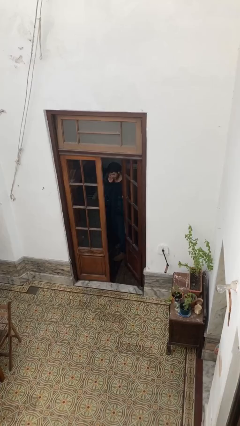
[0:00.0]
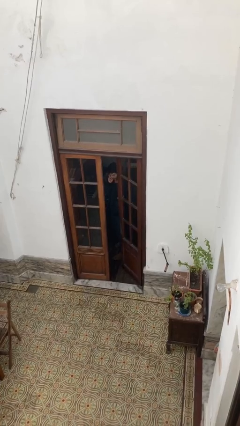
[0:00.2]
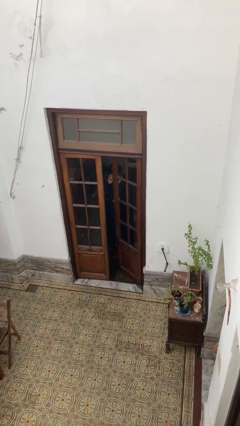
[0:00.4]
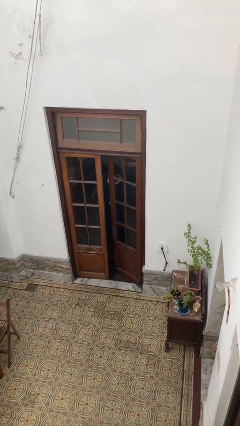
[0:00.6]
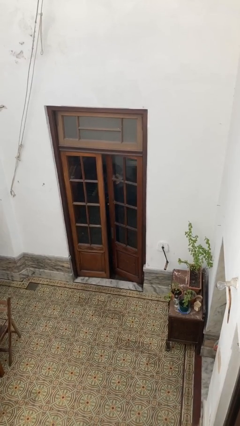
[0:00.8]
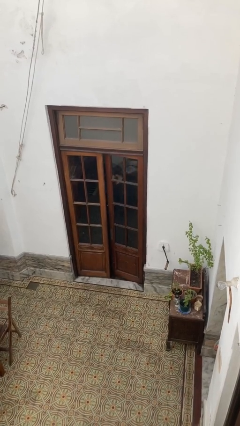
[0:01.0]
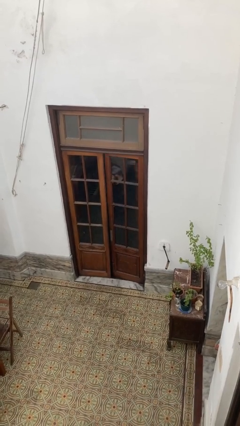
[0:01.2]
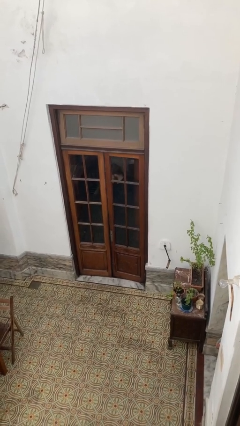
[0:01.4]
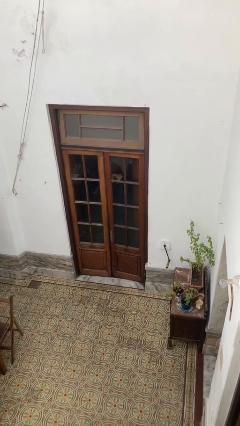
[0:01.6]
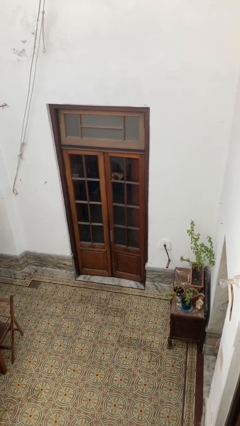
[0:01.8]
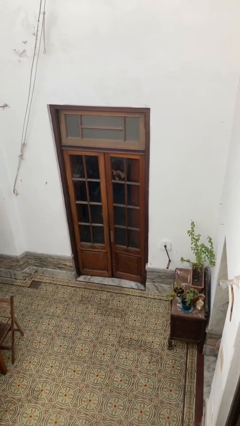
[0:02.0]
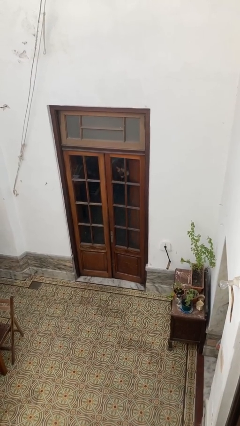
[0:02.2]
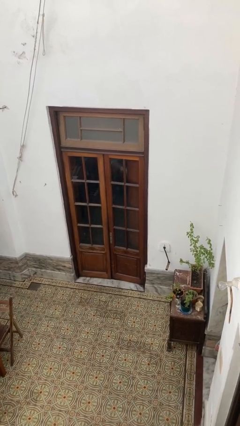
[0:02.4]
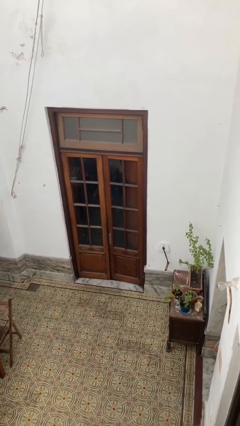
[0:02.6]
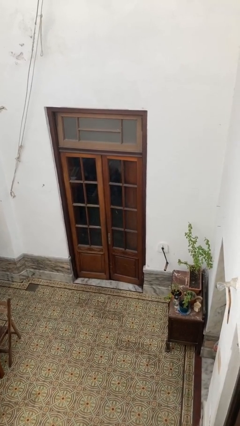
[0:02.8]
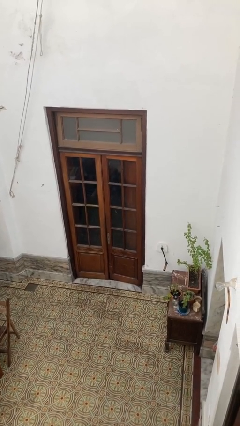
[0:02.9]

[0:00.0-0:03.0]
person closes facility door

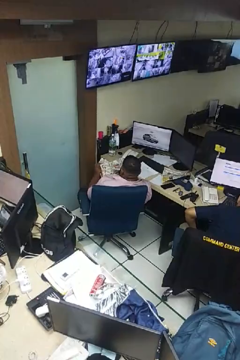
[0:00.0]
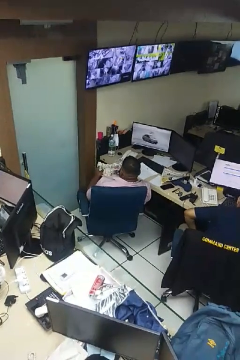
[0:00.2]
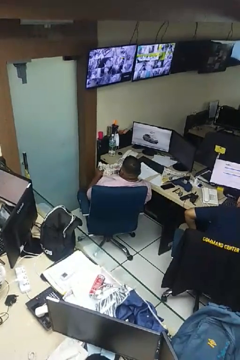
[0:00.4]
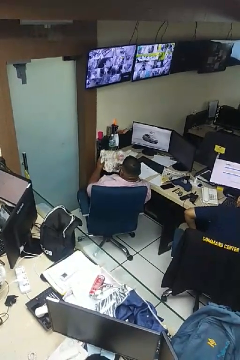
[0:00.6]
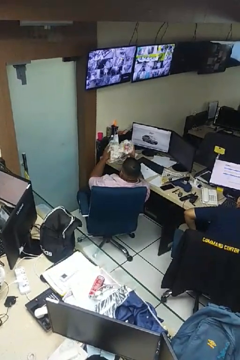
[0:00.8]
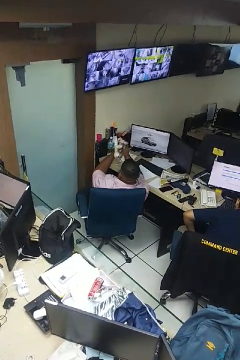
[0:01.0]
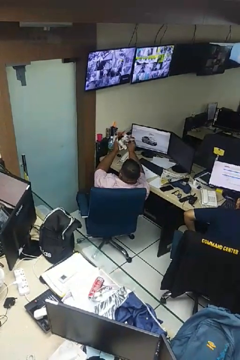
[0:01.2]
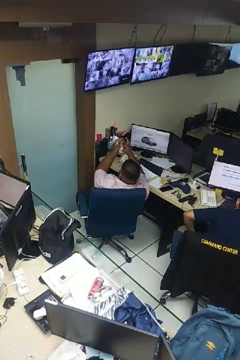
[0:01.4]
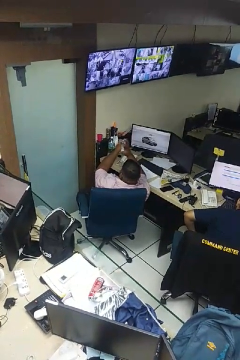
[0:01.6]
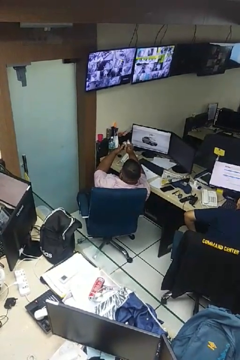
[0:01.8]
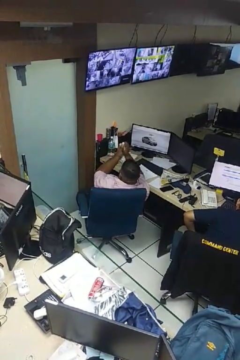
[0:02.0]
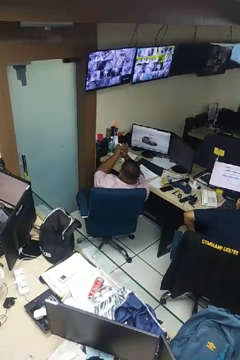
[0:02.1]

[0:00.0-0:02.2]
person crumples paper

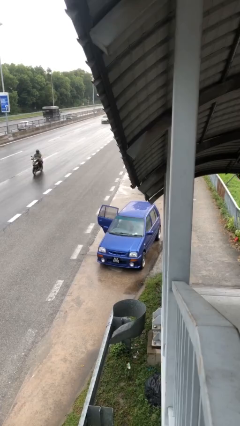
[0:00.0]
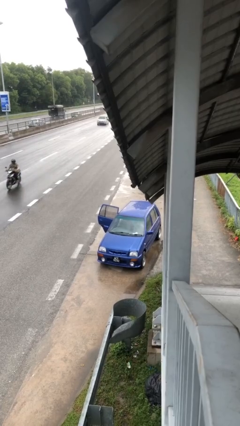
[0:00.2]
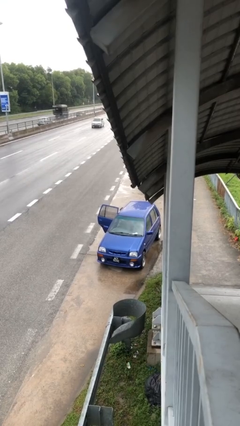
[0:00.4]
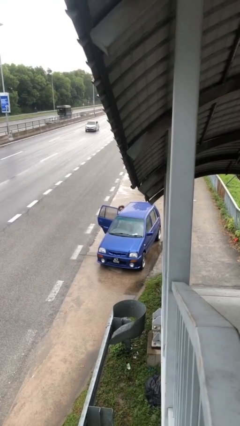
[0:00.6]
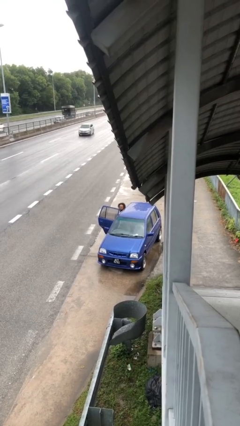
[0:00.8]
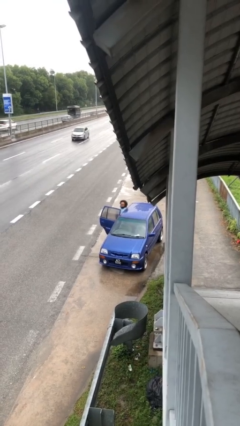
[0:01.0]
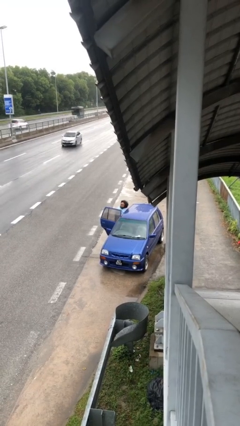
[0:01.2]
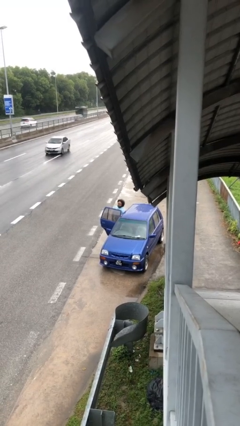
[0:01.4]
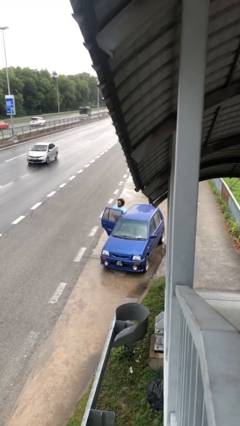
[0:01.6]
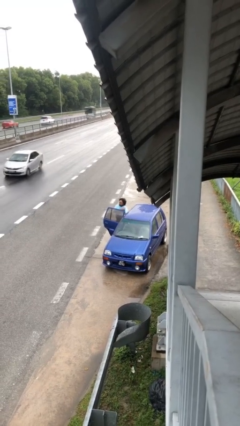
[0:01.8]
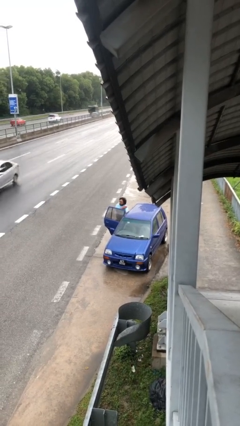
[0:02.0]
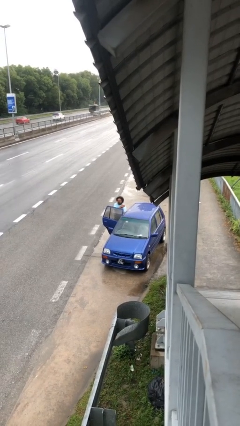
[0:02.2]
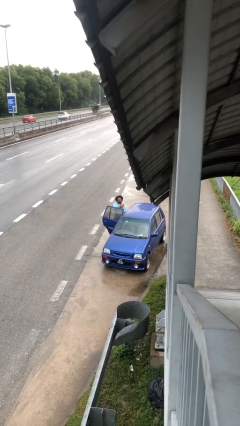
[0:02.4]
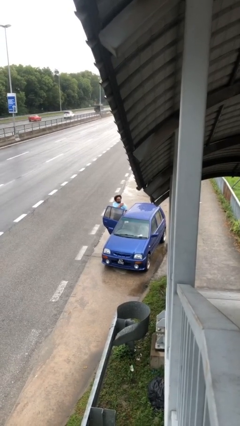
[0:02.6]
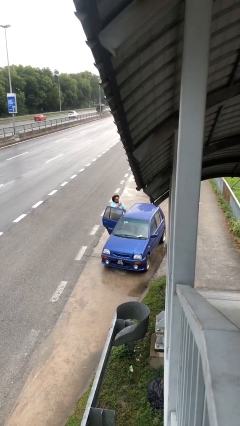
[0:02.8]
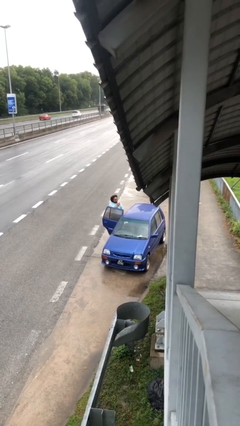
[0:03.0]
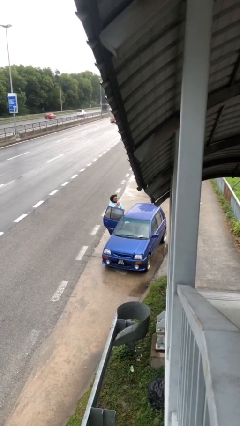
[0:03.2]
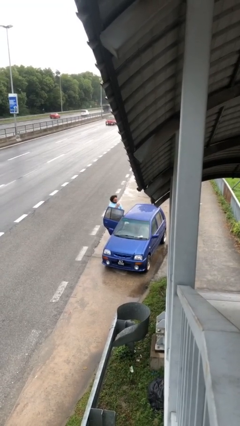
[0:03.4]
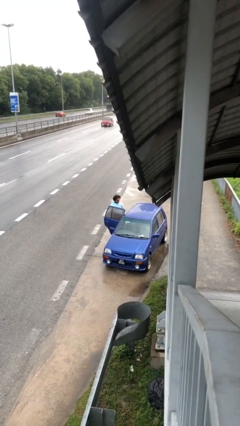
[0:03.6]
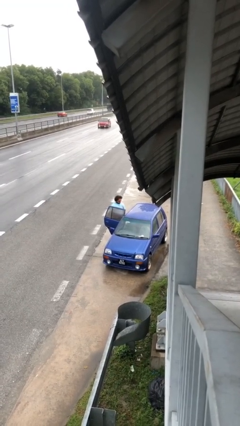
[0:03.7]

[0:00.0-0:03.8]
person exits car

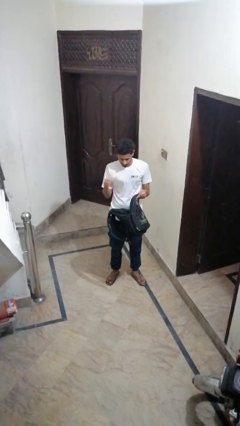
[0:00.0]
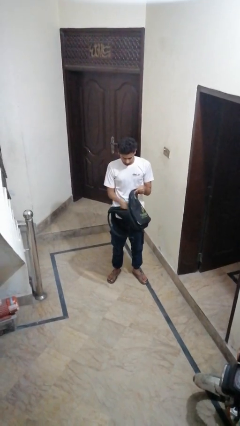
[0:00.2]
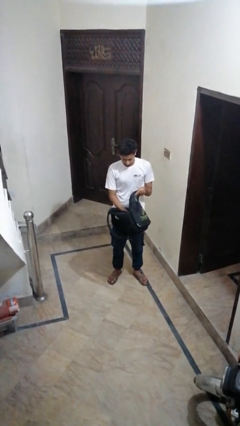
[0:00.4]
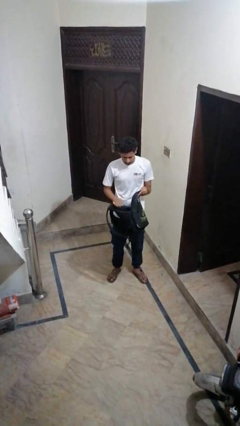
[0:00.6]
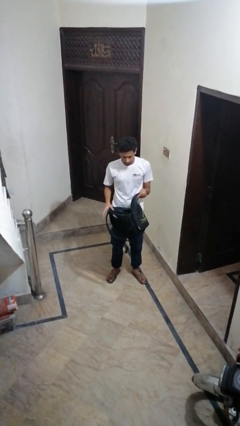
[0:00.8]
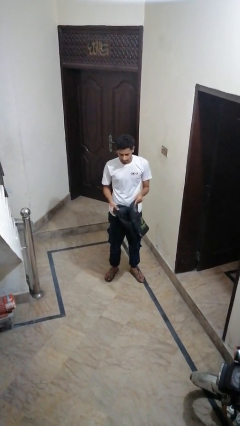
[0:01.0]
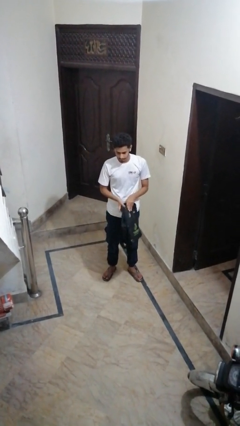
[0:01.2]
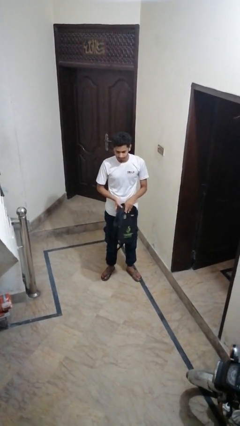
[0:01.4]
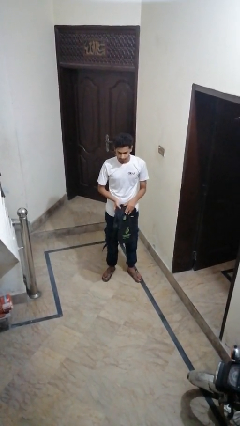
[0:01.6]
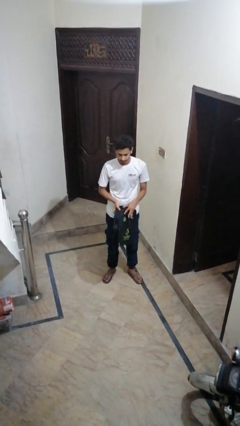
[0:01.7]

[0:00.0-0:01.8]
person puts object into backpack

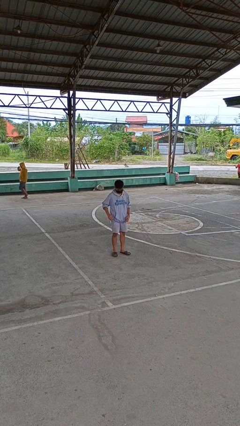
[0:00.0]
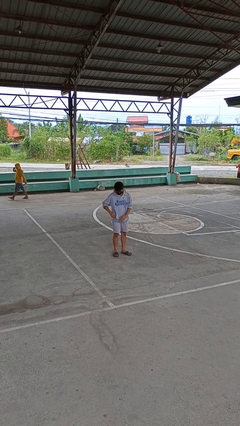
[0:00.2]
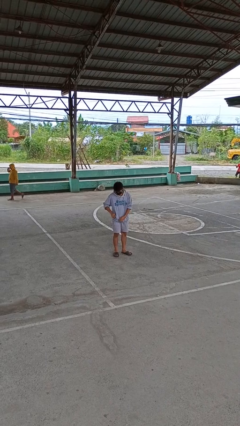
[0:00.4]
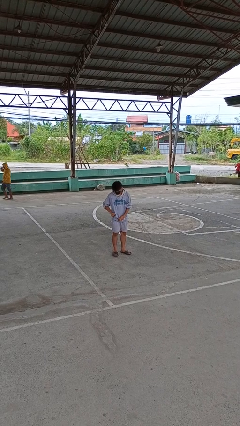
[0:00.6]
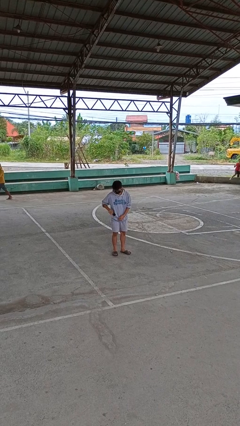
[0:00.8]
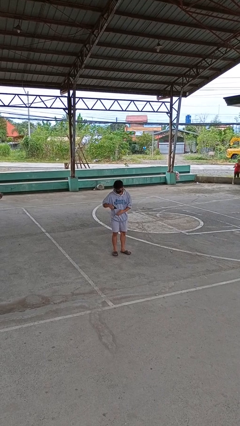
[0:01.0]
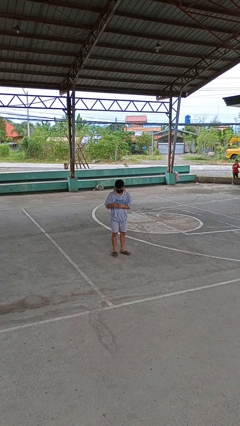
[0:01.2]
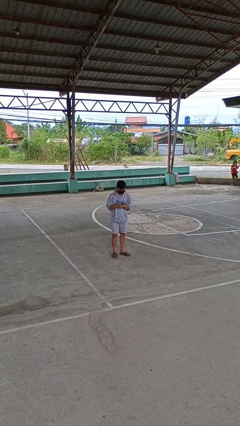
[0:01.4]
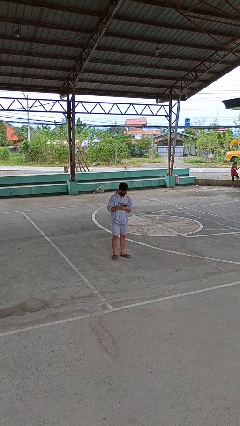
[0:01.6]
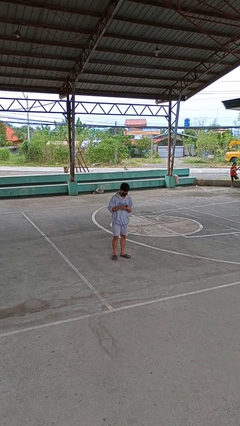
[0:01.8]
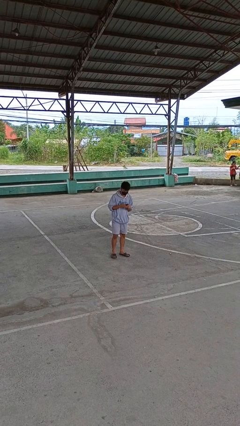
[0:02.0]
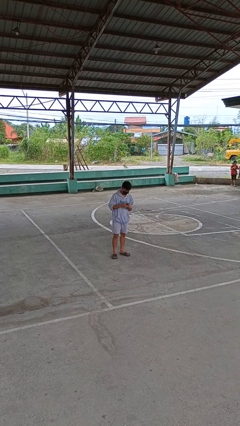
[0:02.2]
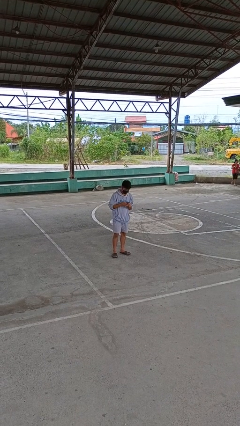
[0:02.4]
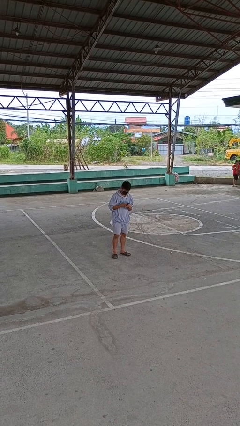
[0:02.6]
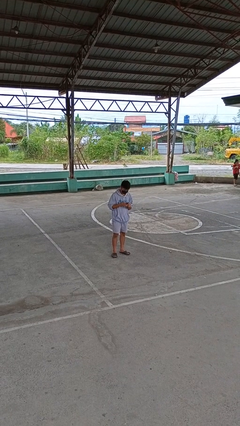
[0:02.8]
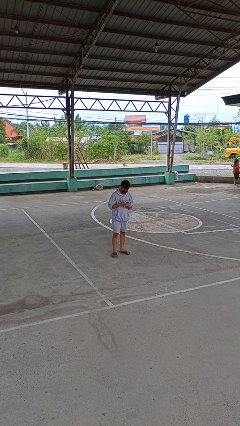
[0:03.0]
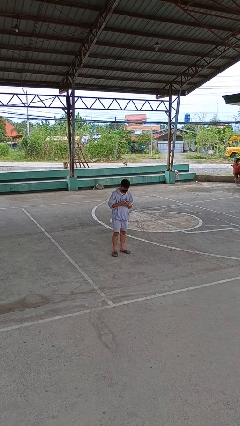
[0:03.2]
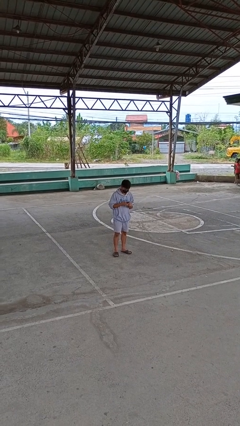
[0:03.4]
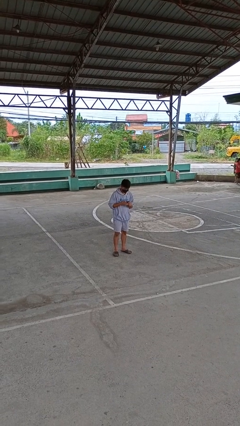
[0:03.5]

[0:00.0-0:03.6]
person takes phone from pocket

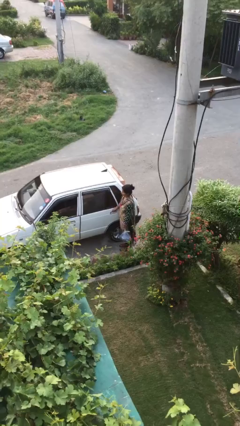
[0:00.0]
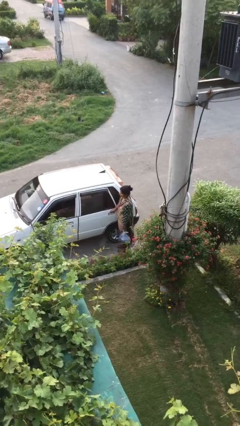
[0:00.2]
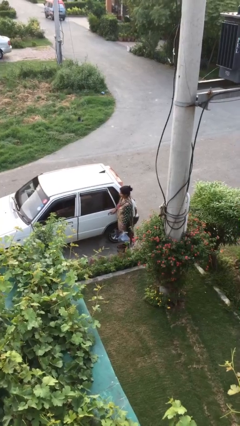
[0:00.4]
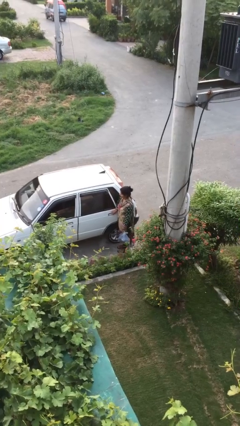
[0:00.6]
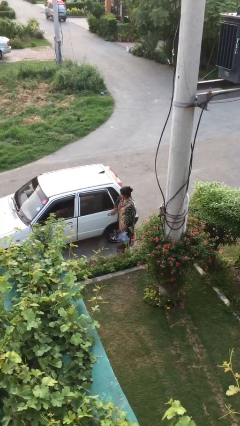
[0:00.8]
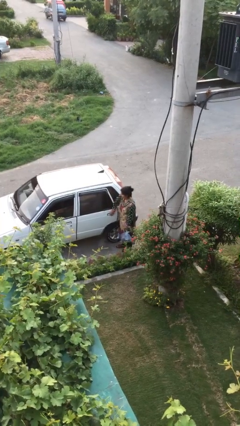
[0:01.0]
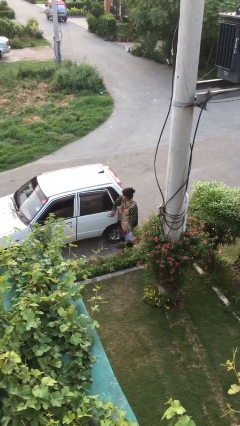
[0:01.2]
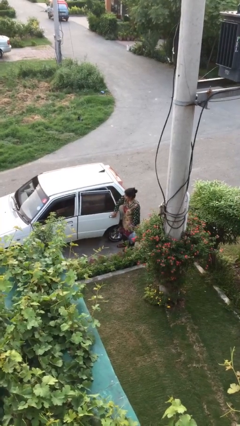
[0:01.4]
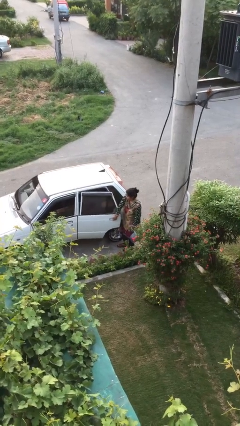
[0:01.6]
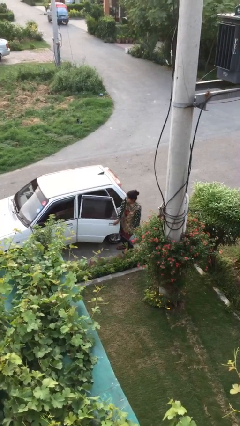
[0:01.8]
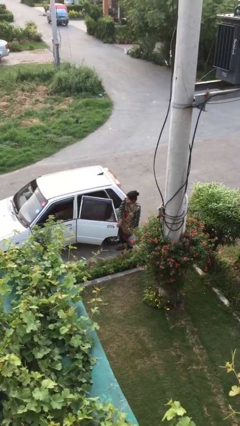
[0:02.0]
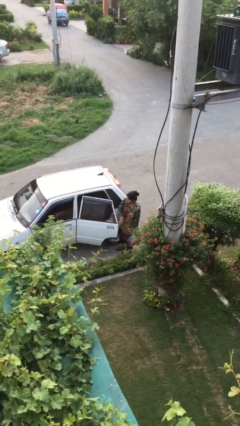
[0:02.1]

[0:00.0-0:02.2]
person opens car door

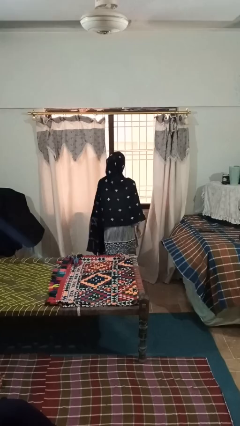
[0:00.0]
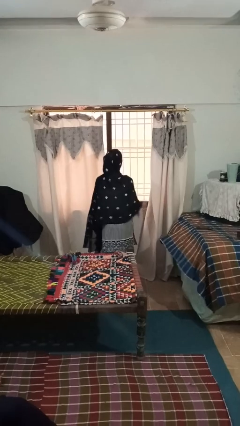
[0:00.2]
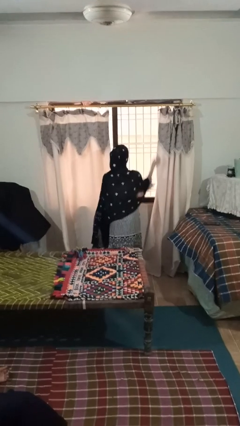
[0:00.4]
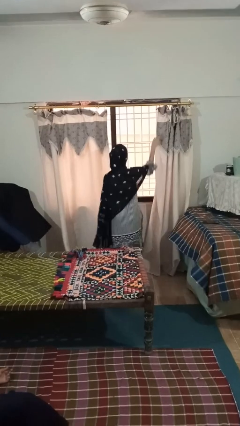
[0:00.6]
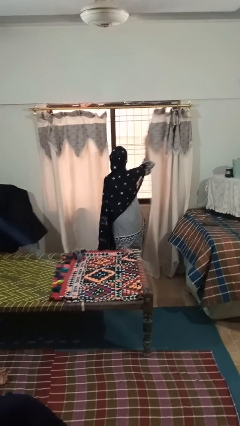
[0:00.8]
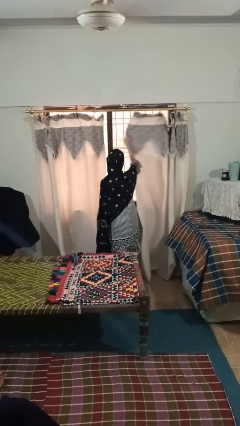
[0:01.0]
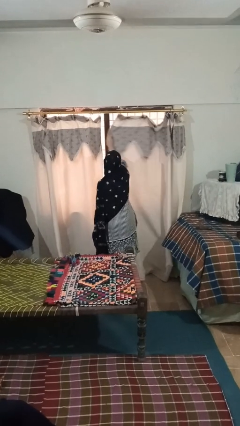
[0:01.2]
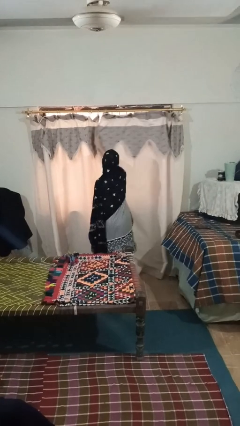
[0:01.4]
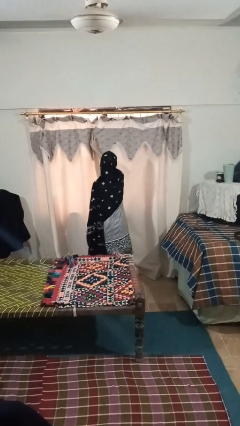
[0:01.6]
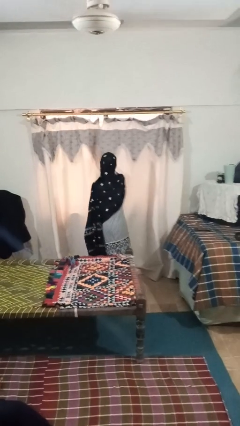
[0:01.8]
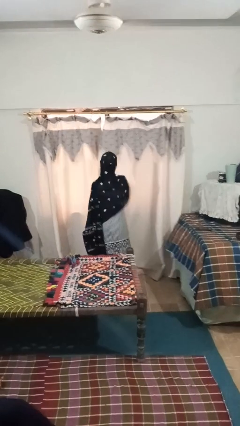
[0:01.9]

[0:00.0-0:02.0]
person closes curtains
